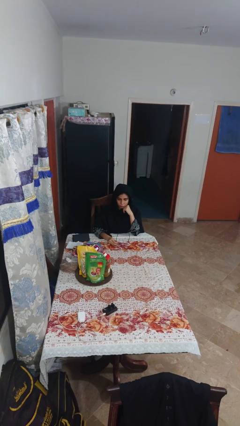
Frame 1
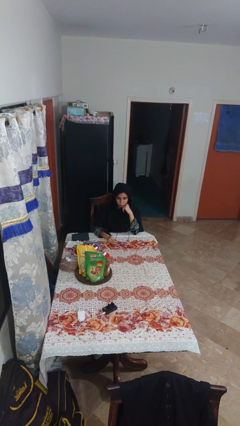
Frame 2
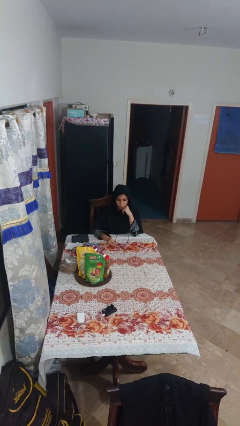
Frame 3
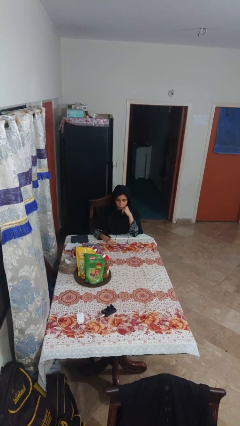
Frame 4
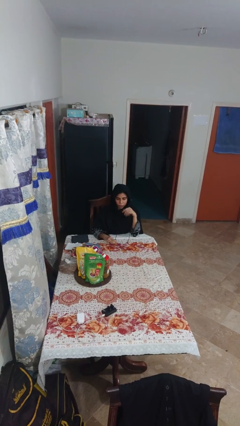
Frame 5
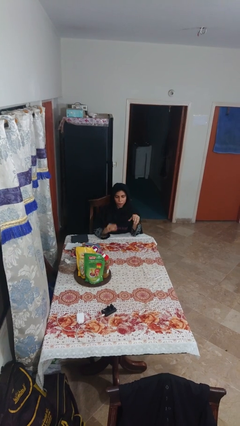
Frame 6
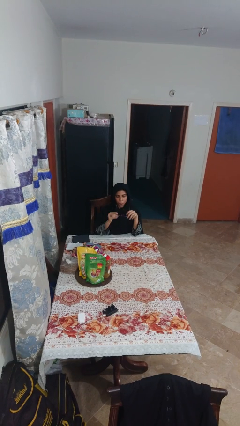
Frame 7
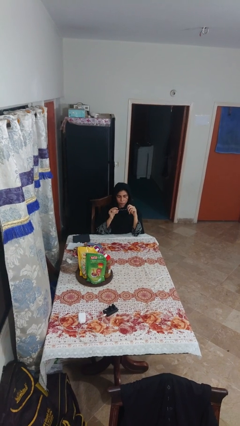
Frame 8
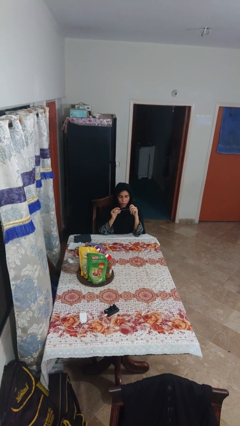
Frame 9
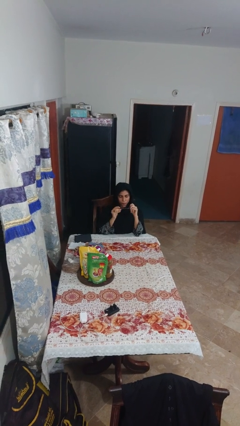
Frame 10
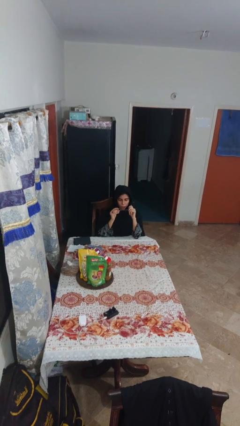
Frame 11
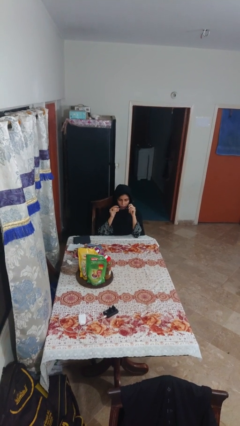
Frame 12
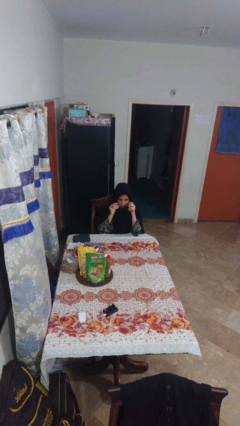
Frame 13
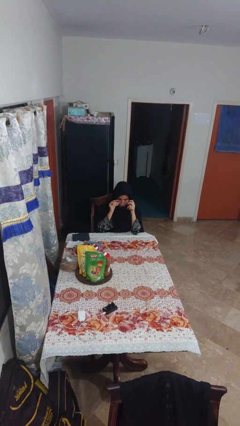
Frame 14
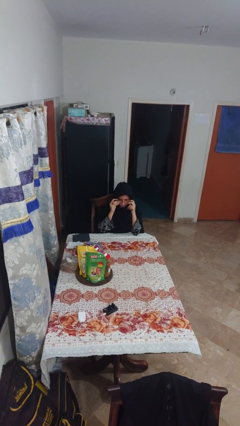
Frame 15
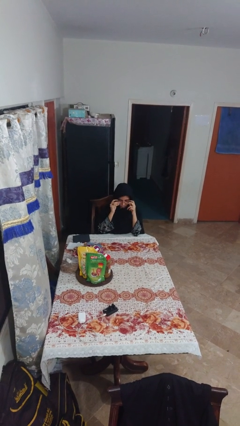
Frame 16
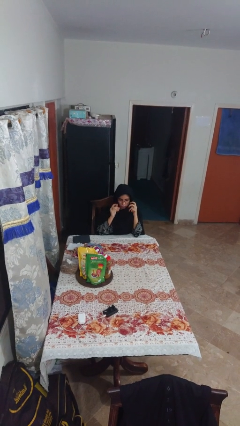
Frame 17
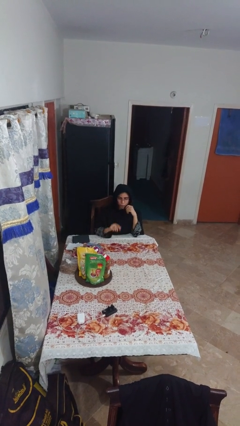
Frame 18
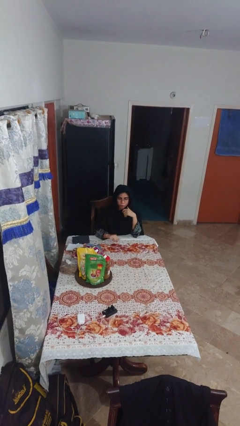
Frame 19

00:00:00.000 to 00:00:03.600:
person puts on glasses

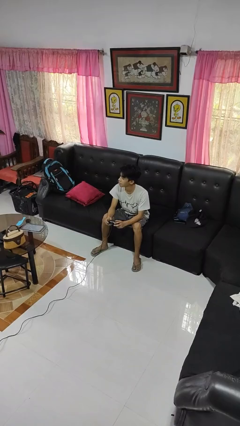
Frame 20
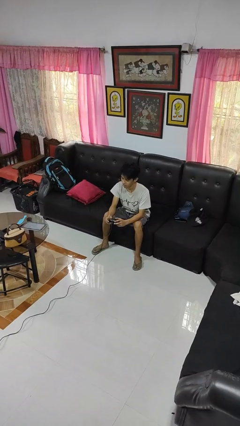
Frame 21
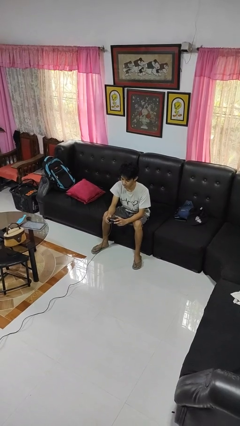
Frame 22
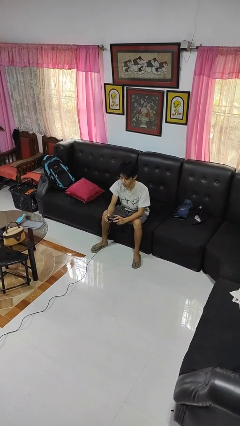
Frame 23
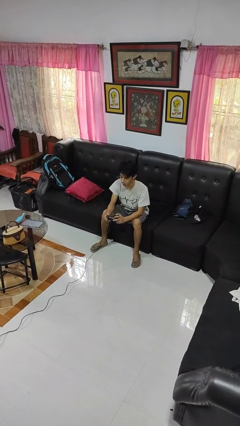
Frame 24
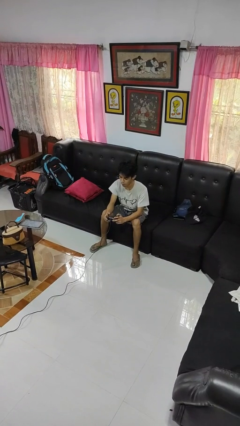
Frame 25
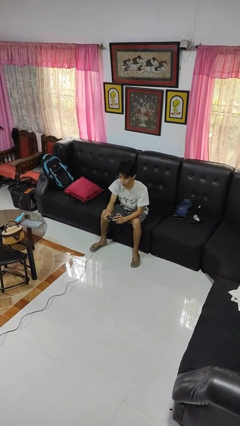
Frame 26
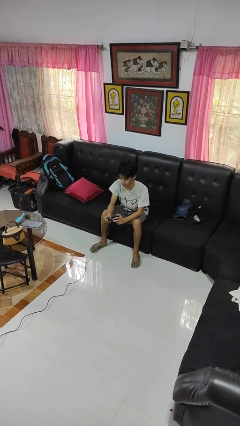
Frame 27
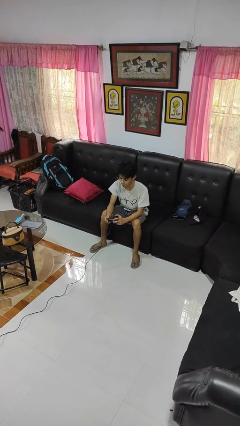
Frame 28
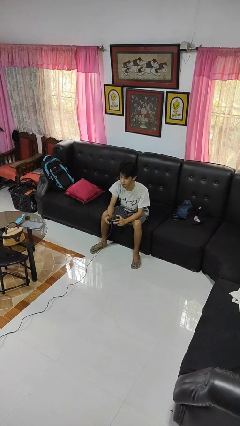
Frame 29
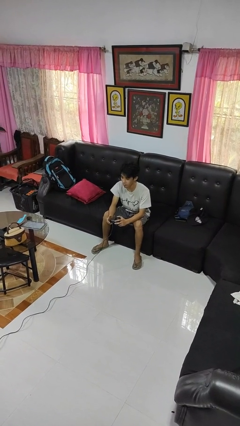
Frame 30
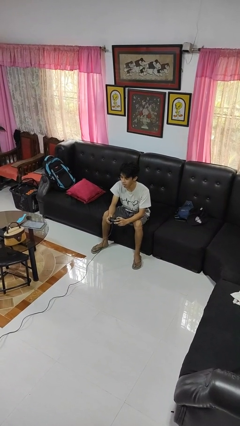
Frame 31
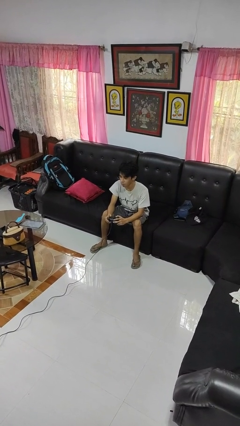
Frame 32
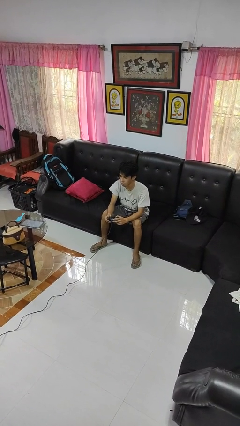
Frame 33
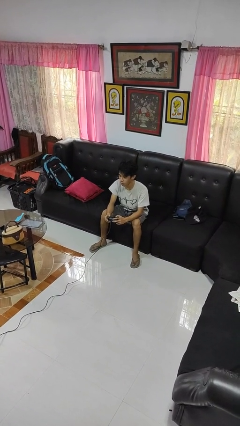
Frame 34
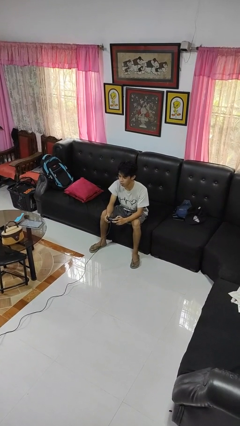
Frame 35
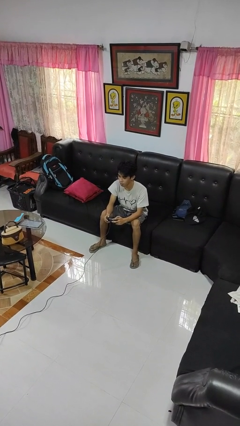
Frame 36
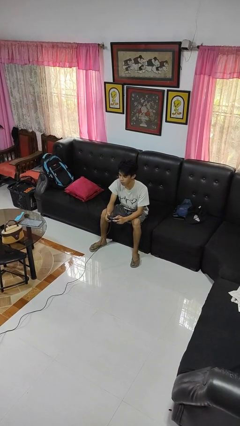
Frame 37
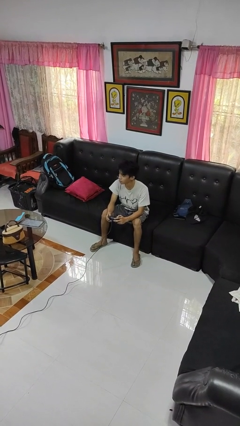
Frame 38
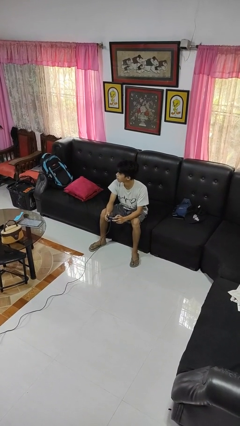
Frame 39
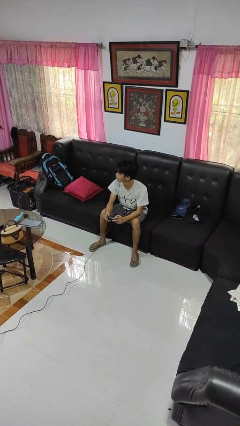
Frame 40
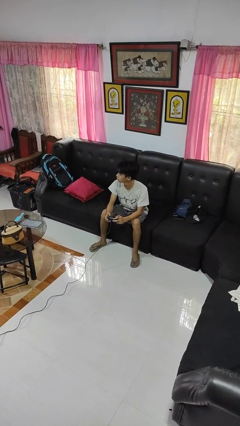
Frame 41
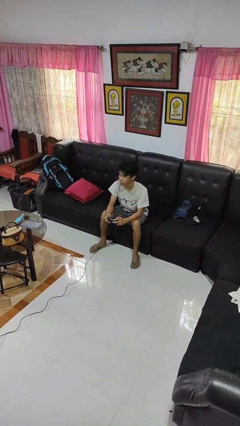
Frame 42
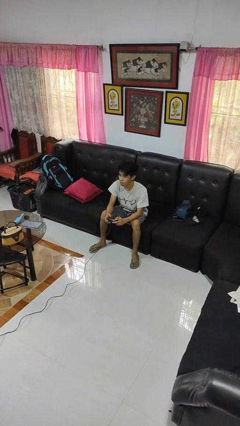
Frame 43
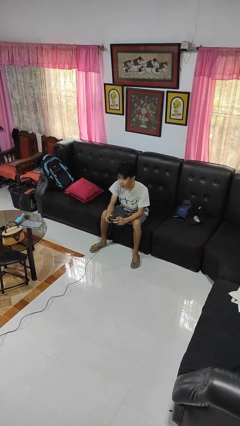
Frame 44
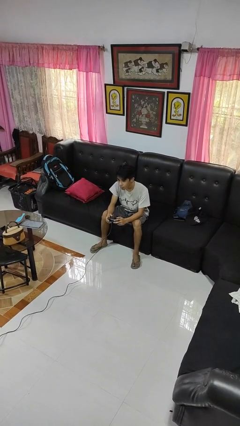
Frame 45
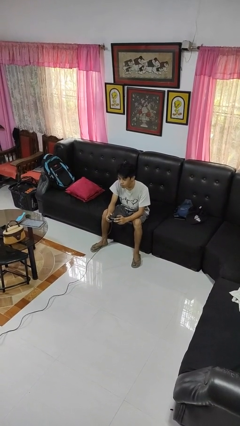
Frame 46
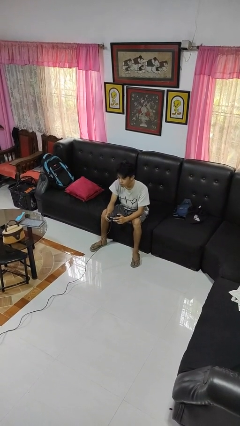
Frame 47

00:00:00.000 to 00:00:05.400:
person interacts with handheld game

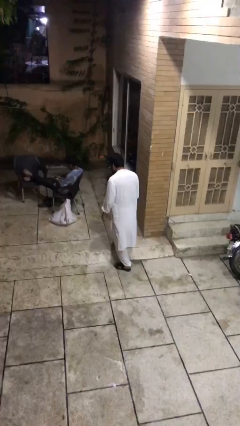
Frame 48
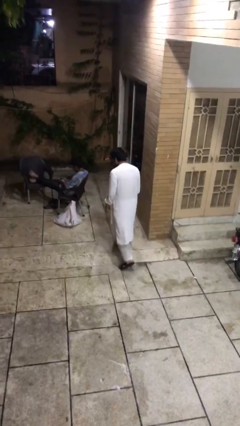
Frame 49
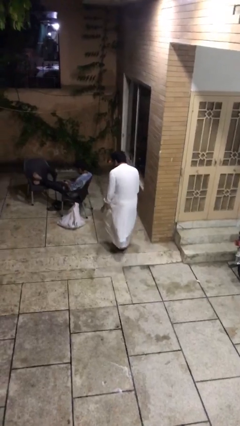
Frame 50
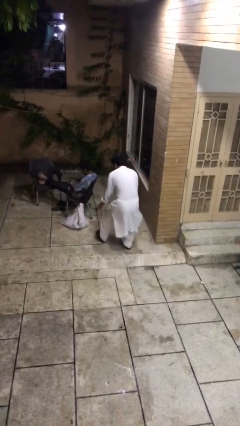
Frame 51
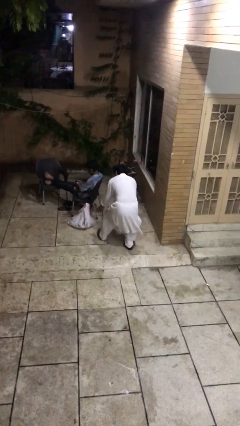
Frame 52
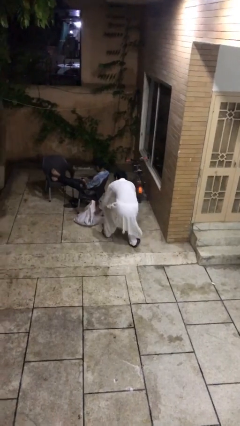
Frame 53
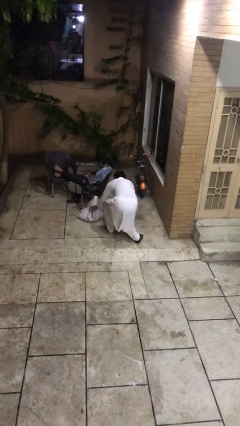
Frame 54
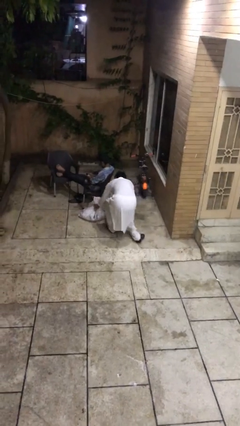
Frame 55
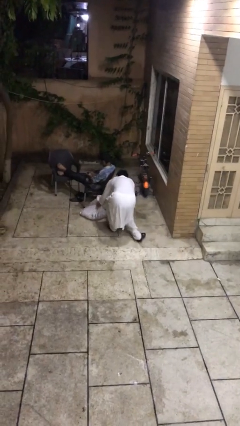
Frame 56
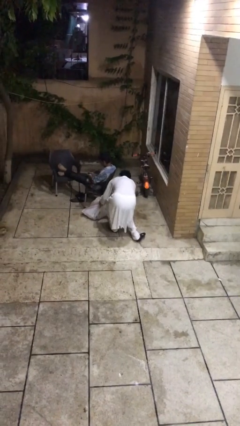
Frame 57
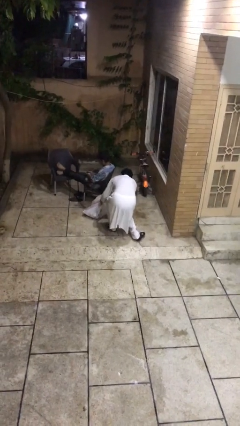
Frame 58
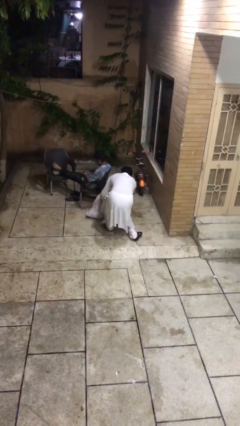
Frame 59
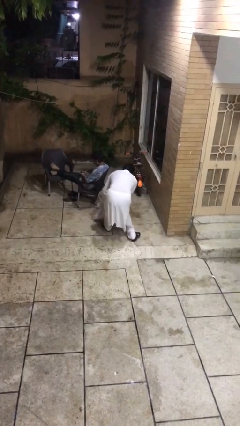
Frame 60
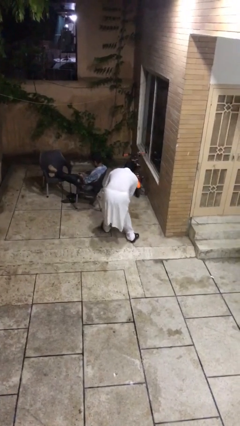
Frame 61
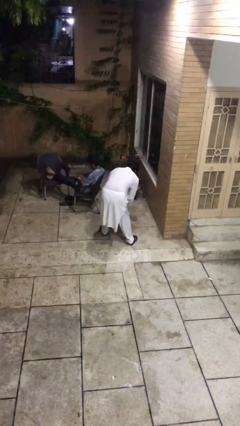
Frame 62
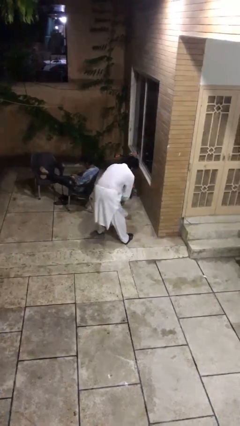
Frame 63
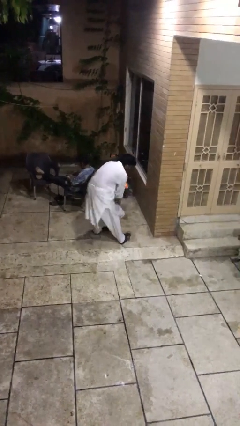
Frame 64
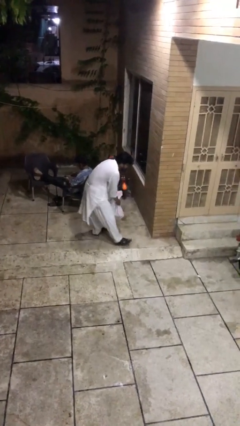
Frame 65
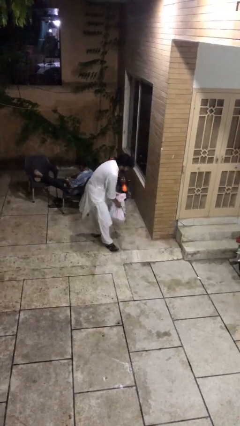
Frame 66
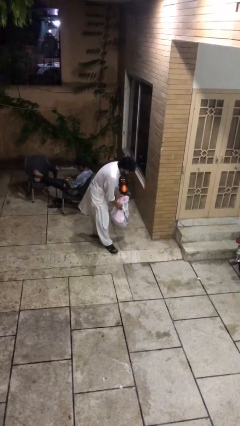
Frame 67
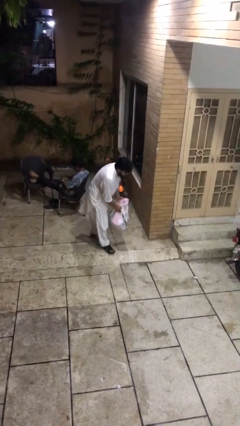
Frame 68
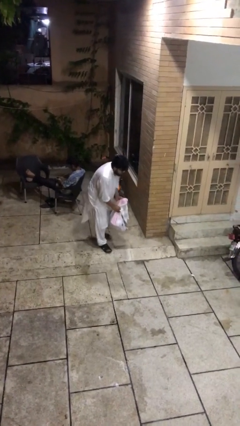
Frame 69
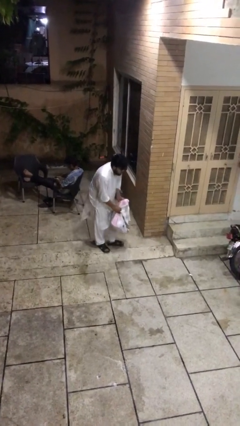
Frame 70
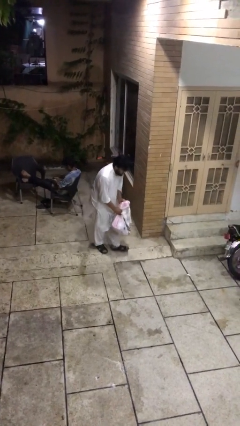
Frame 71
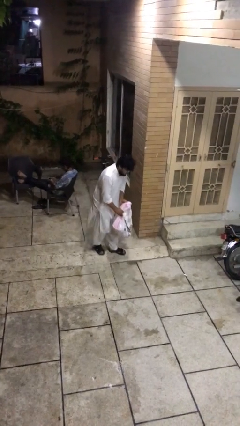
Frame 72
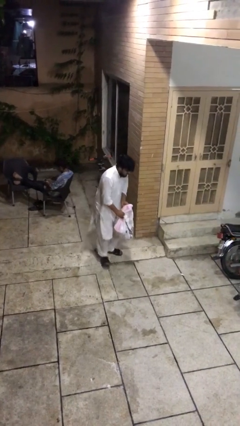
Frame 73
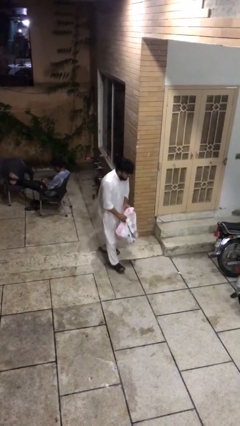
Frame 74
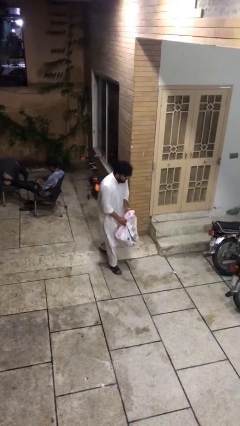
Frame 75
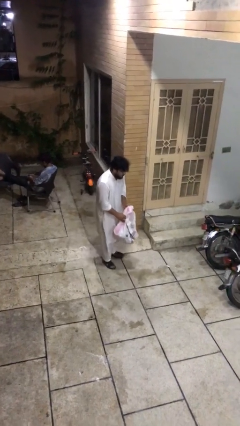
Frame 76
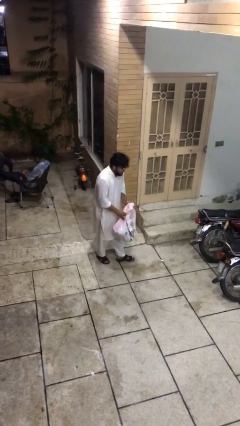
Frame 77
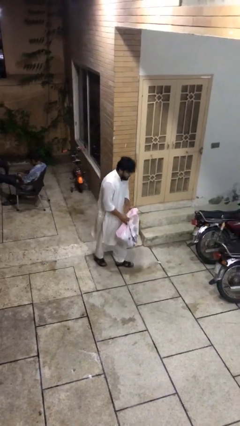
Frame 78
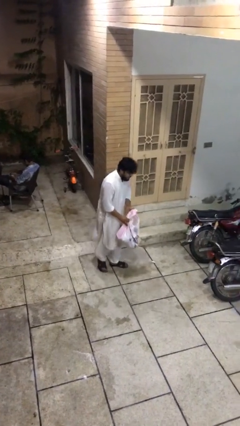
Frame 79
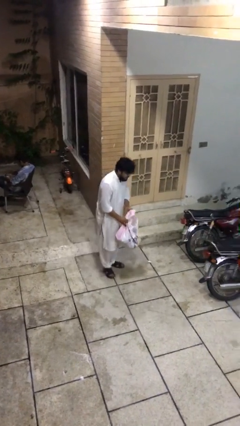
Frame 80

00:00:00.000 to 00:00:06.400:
person steals object from person

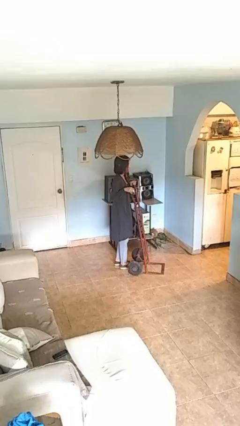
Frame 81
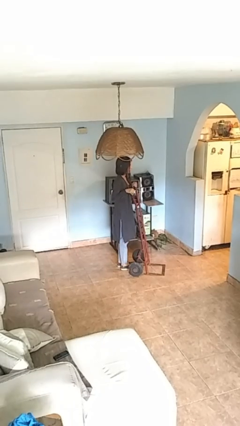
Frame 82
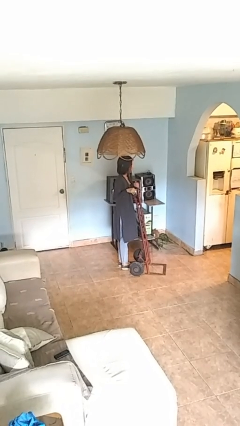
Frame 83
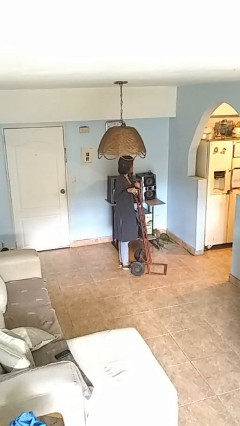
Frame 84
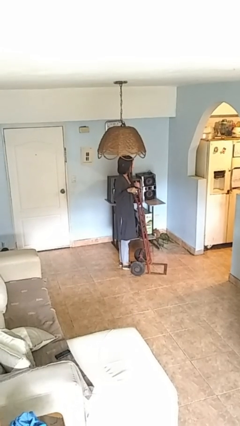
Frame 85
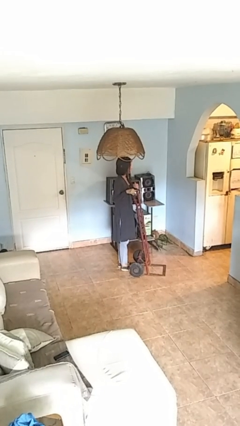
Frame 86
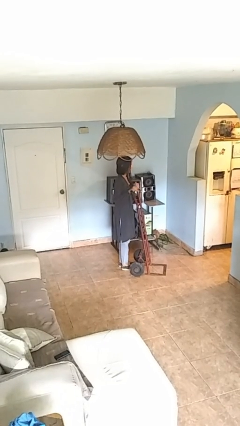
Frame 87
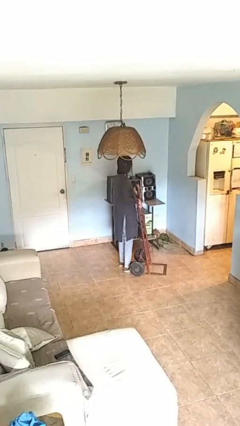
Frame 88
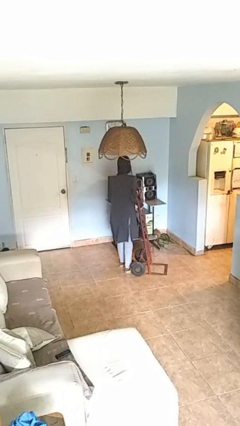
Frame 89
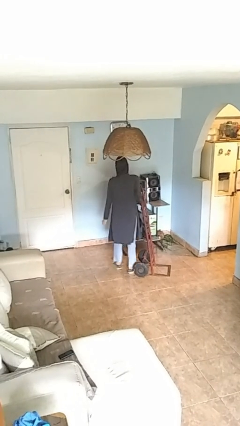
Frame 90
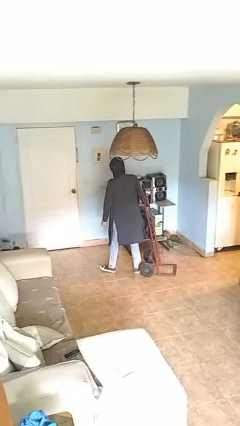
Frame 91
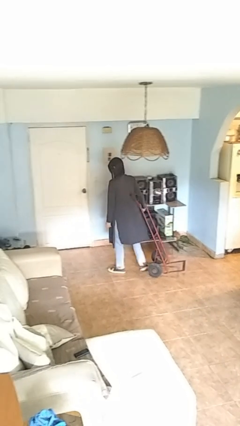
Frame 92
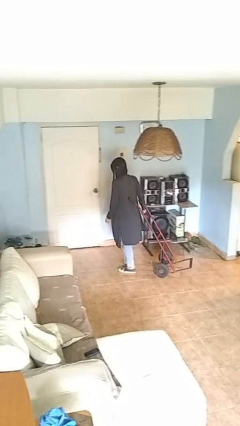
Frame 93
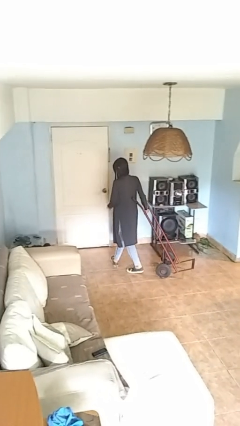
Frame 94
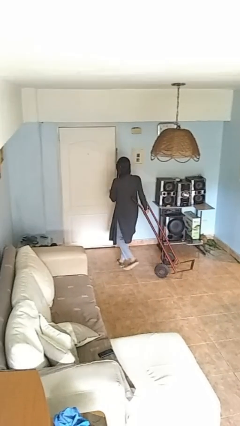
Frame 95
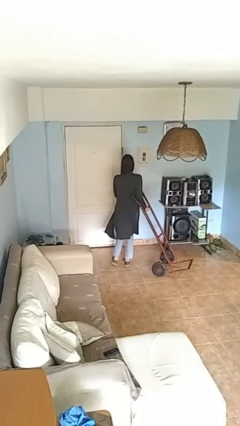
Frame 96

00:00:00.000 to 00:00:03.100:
person pulls wheeled cart
